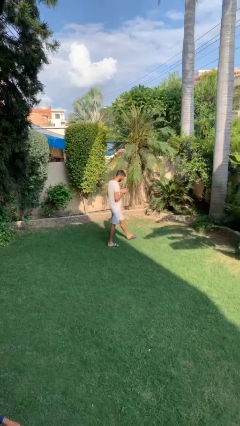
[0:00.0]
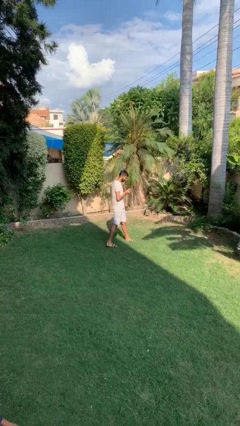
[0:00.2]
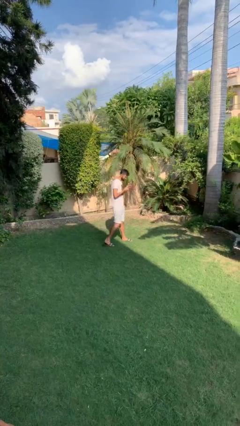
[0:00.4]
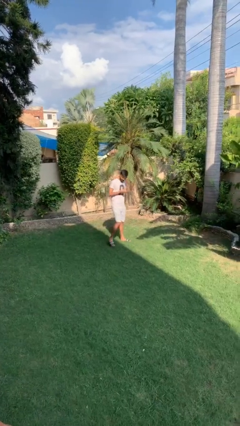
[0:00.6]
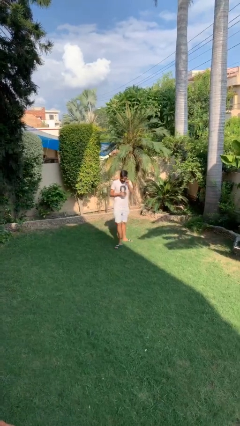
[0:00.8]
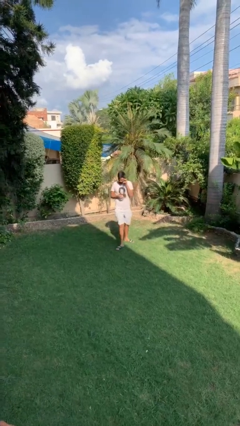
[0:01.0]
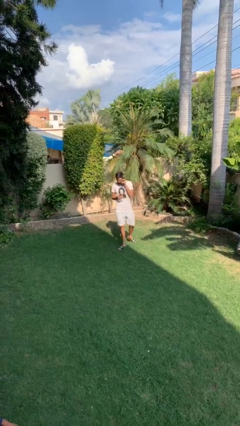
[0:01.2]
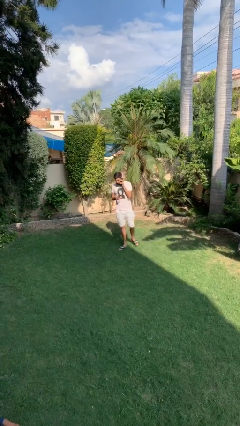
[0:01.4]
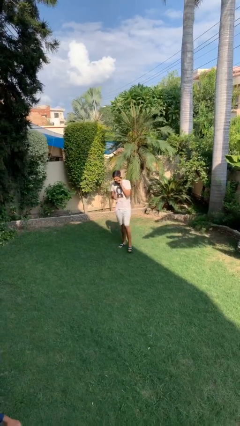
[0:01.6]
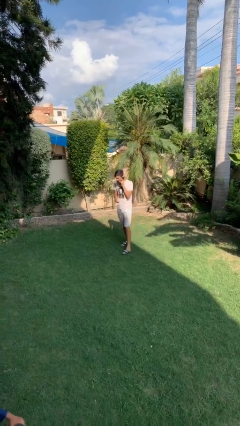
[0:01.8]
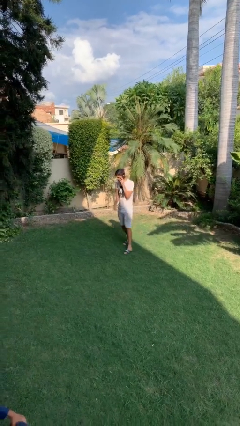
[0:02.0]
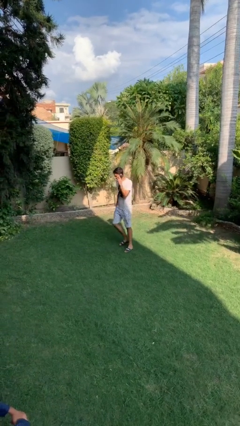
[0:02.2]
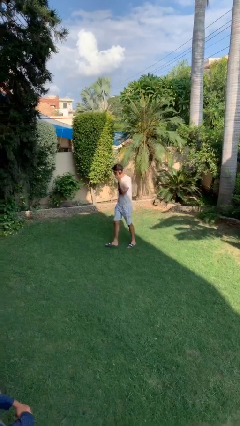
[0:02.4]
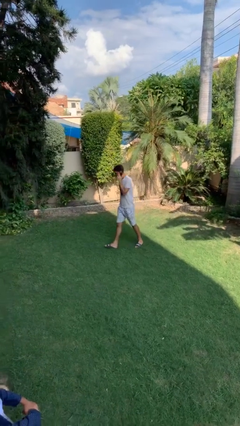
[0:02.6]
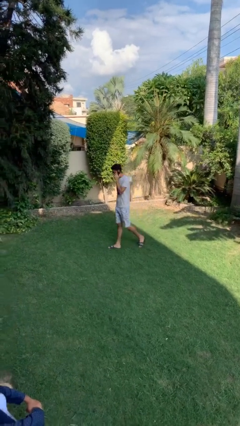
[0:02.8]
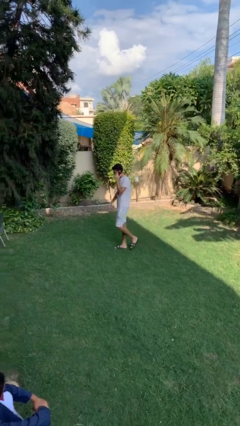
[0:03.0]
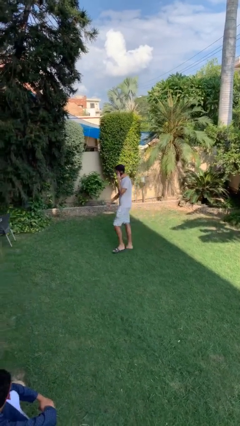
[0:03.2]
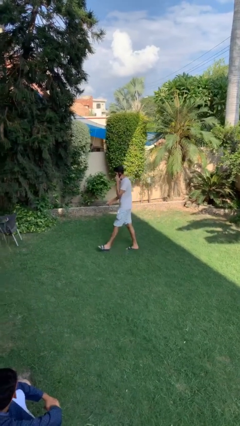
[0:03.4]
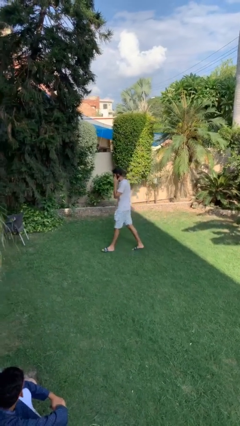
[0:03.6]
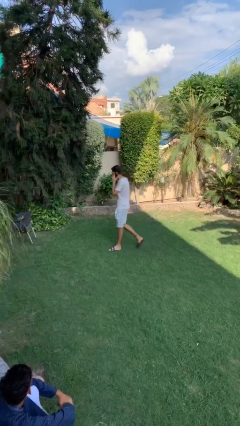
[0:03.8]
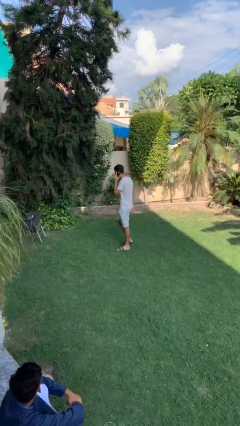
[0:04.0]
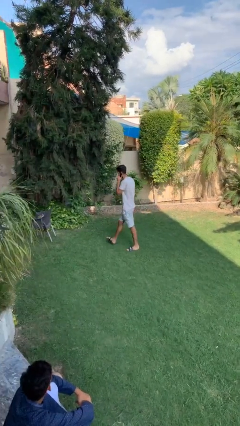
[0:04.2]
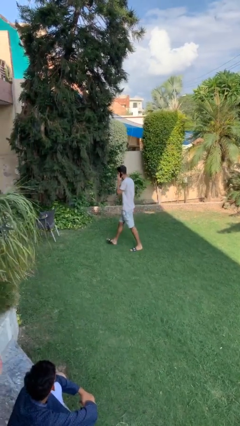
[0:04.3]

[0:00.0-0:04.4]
person talks on phone

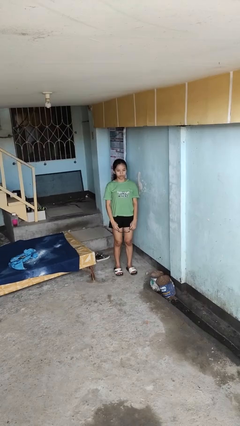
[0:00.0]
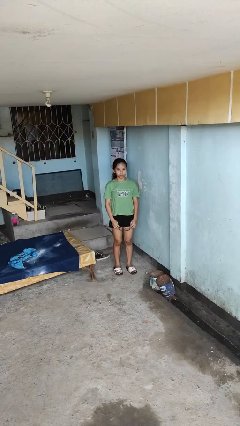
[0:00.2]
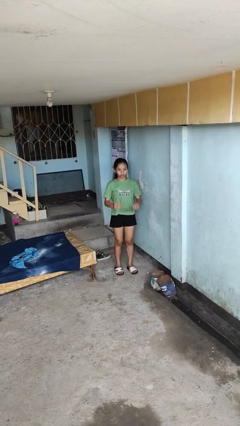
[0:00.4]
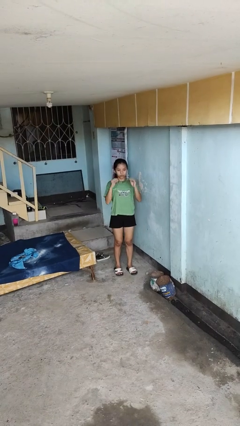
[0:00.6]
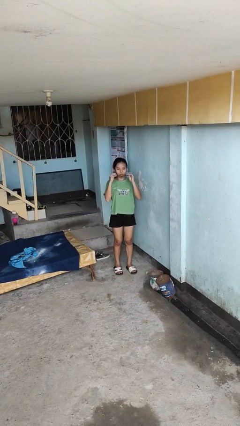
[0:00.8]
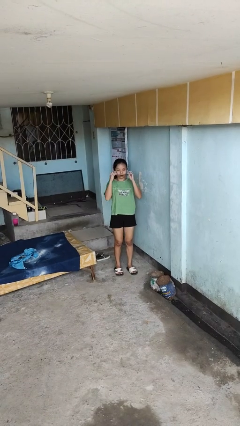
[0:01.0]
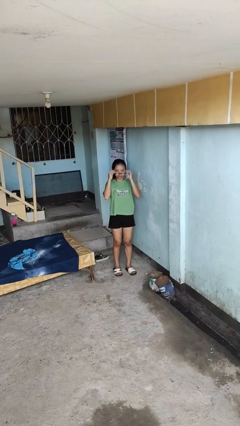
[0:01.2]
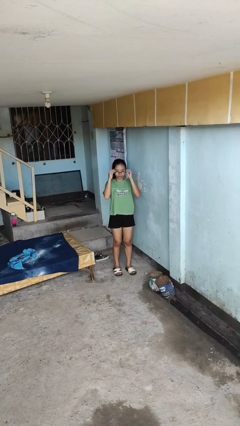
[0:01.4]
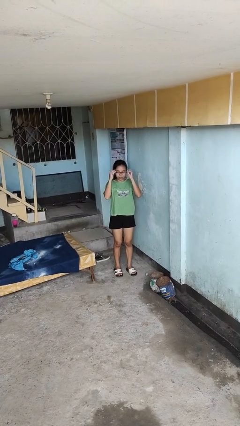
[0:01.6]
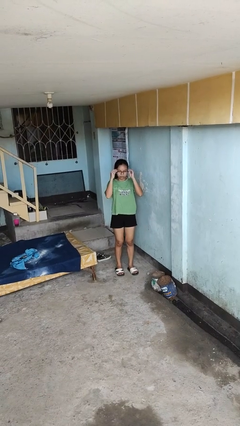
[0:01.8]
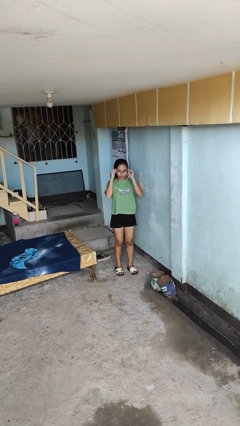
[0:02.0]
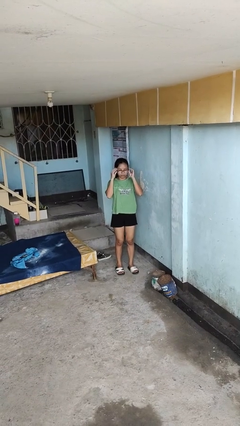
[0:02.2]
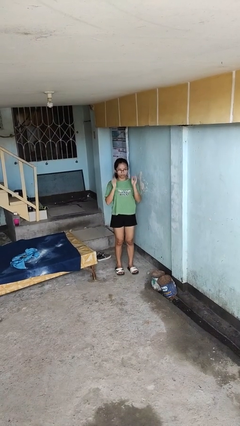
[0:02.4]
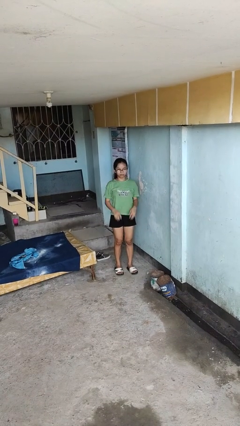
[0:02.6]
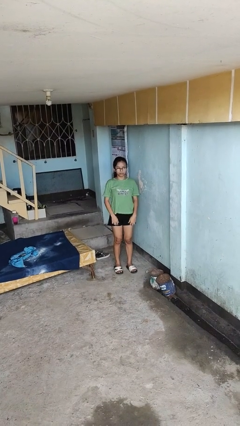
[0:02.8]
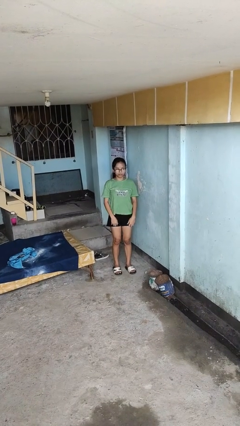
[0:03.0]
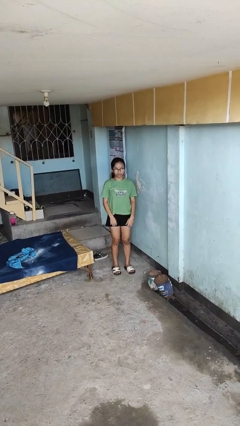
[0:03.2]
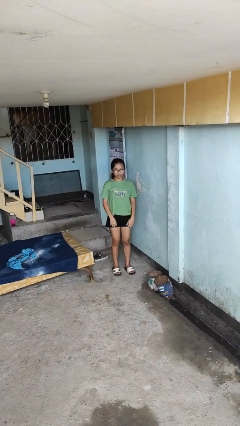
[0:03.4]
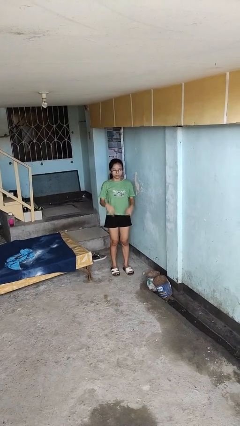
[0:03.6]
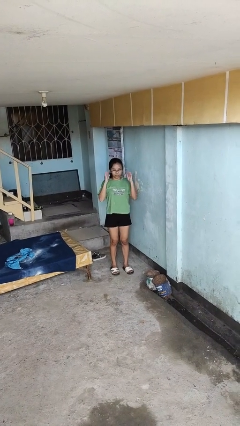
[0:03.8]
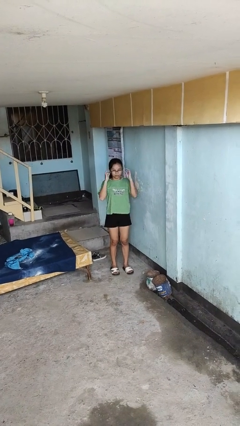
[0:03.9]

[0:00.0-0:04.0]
person puts on glasses

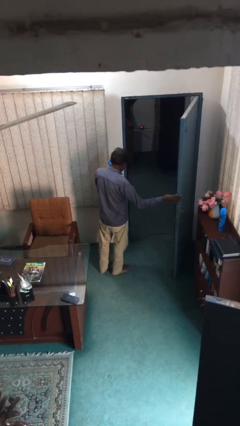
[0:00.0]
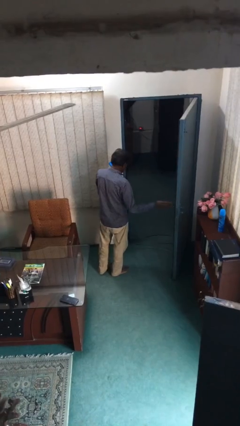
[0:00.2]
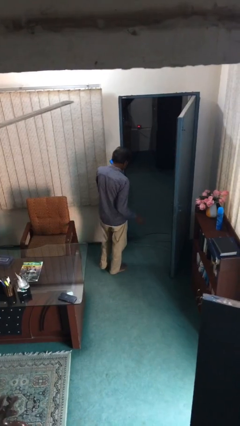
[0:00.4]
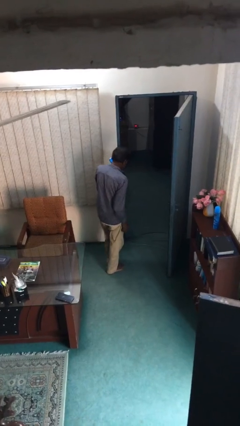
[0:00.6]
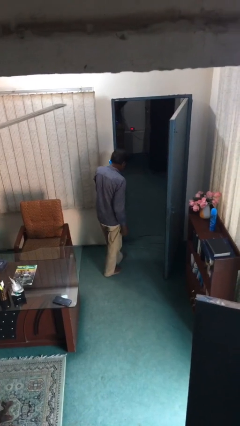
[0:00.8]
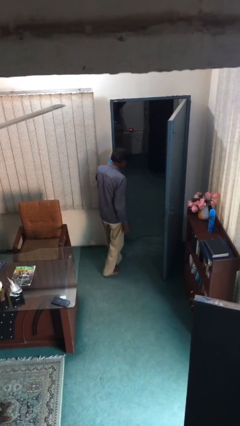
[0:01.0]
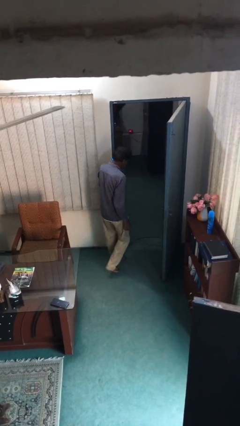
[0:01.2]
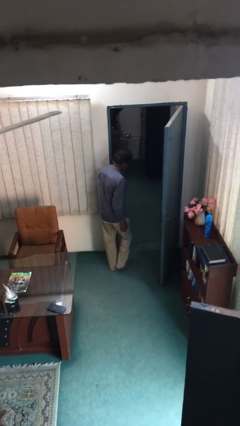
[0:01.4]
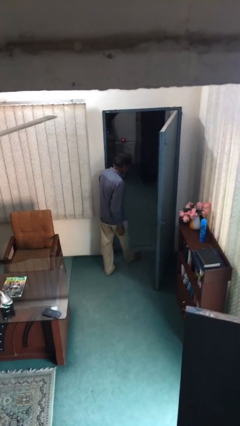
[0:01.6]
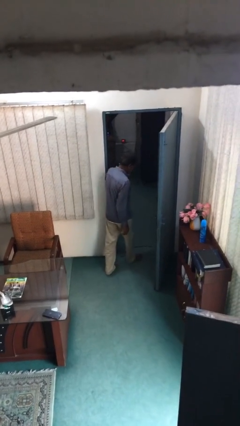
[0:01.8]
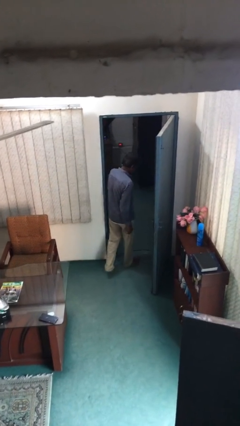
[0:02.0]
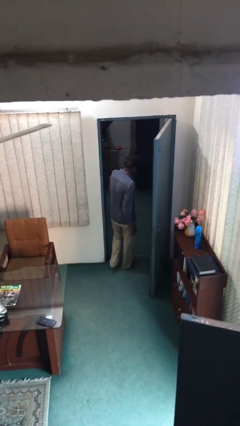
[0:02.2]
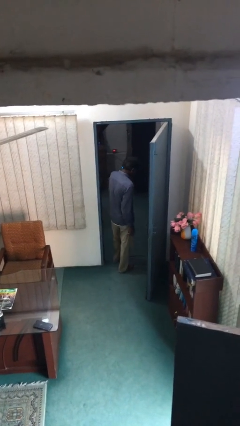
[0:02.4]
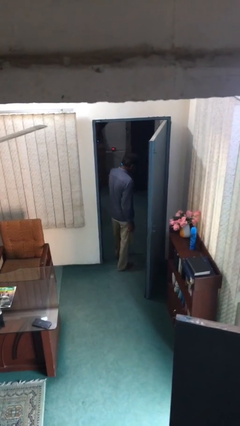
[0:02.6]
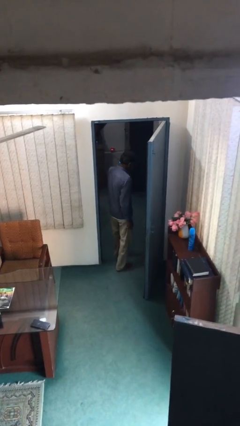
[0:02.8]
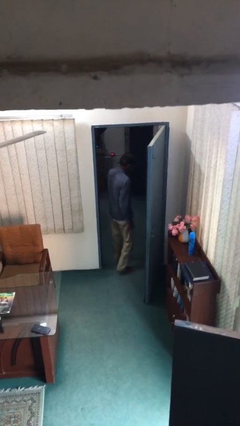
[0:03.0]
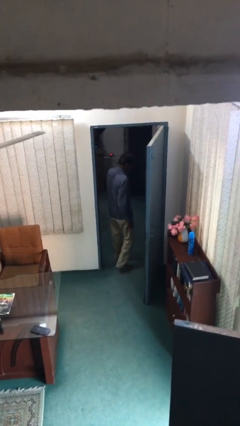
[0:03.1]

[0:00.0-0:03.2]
person exits scene through structure

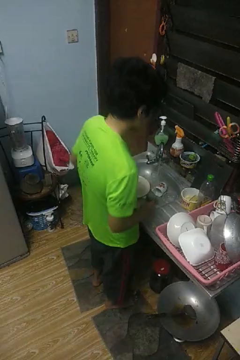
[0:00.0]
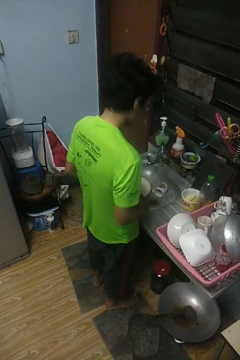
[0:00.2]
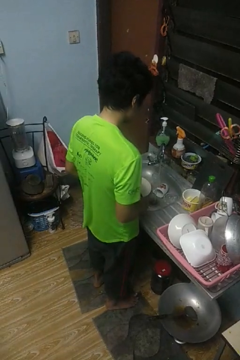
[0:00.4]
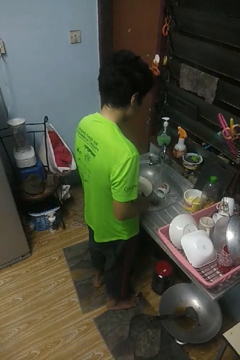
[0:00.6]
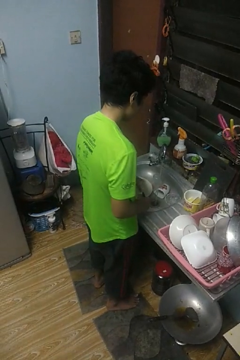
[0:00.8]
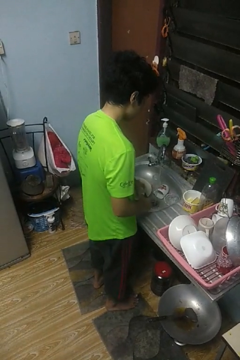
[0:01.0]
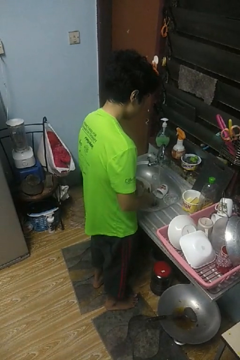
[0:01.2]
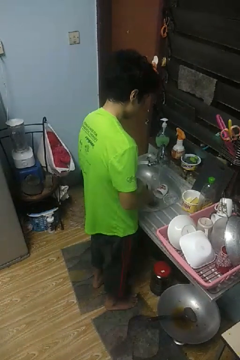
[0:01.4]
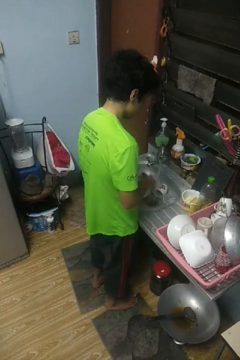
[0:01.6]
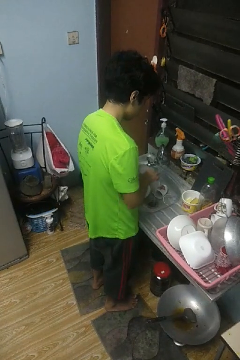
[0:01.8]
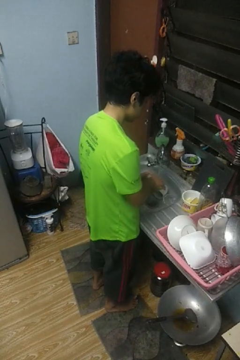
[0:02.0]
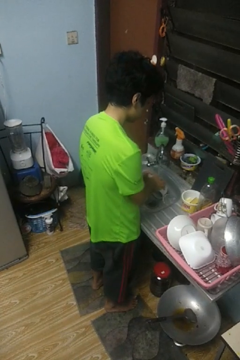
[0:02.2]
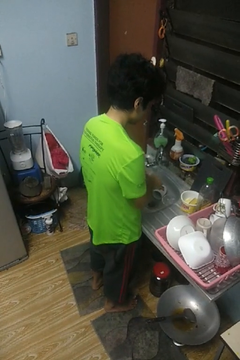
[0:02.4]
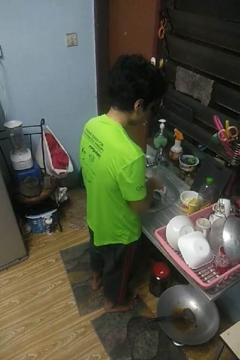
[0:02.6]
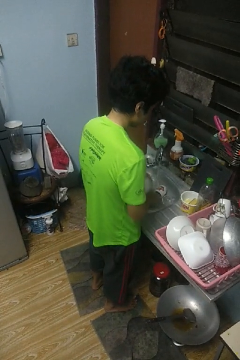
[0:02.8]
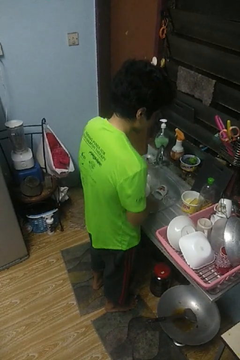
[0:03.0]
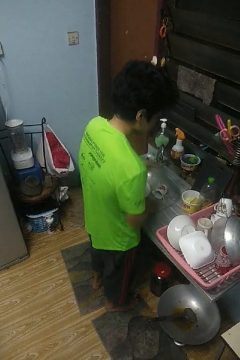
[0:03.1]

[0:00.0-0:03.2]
person washes dish

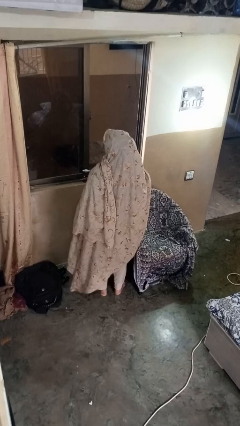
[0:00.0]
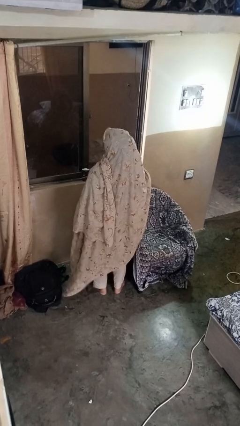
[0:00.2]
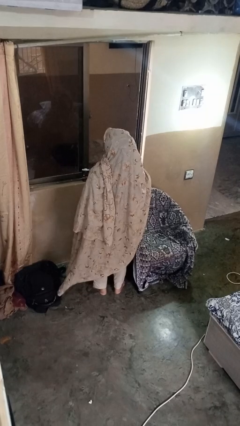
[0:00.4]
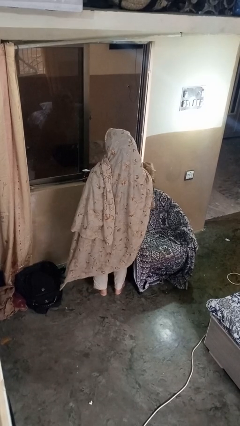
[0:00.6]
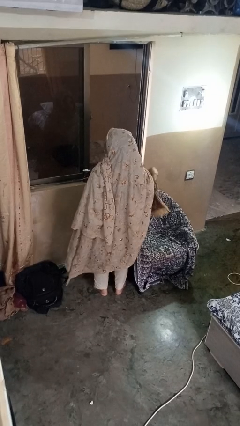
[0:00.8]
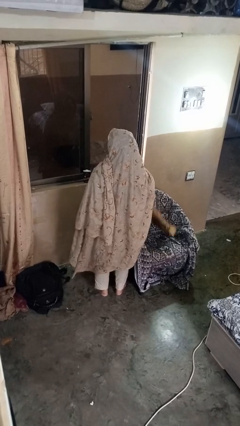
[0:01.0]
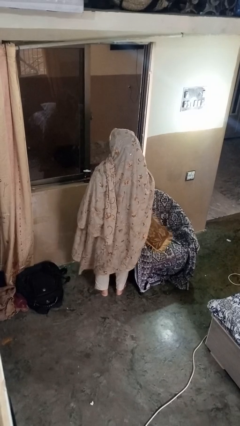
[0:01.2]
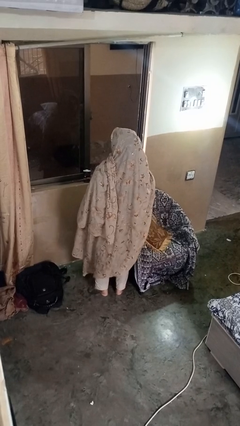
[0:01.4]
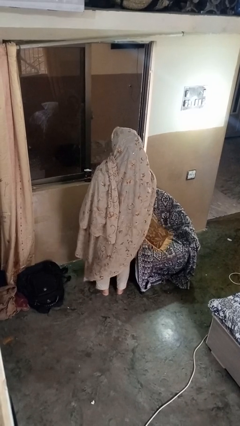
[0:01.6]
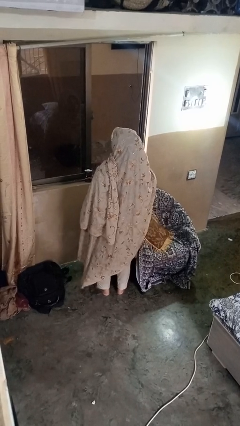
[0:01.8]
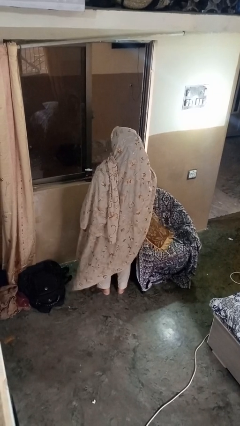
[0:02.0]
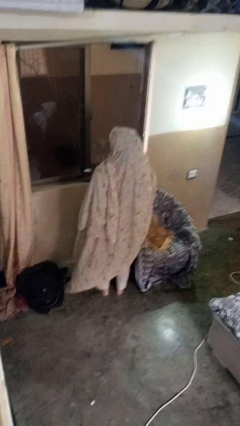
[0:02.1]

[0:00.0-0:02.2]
person puts down object on couch

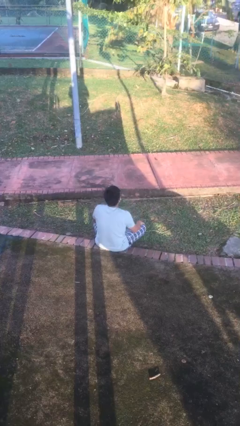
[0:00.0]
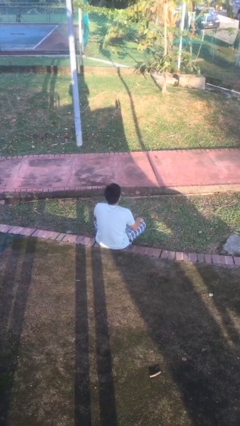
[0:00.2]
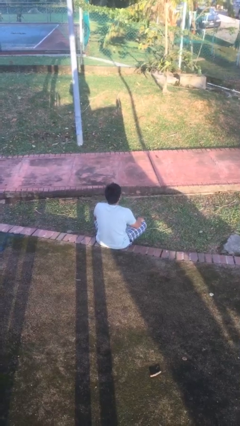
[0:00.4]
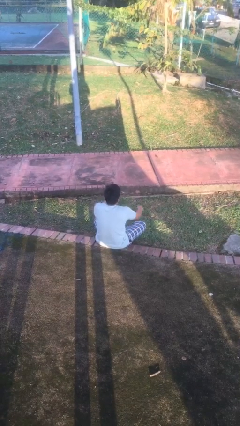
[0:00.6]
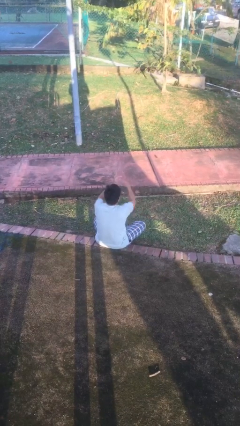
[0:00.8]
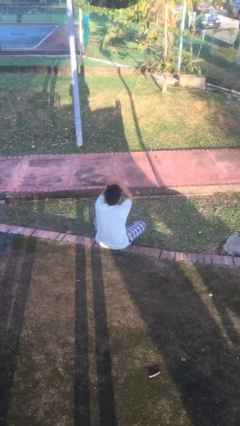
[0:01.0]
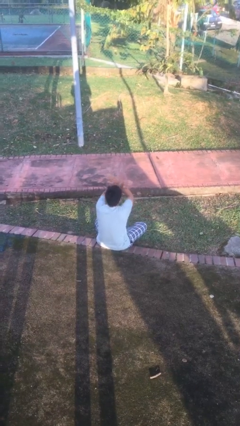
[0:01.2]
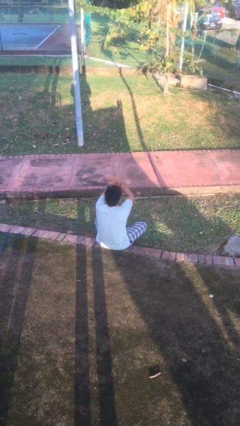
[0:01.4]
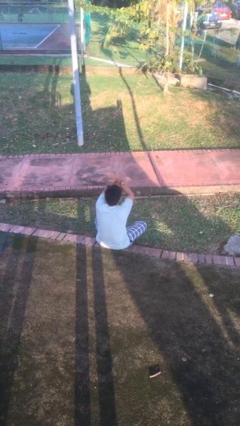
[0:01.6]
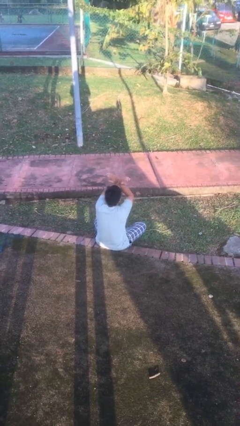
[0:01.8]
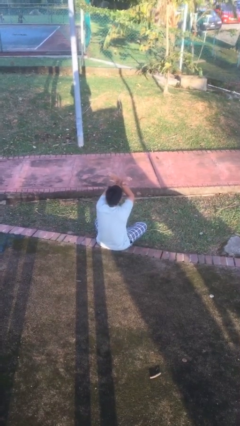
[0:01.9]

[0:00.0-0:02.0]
person gestures arms x
